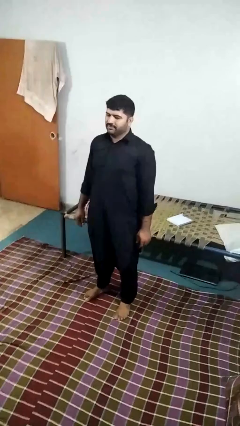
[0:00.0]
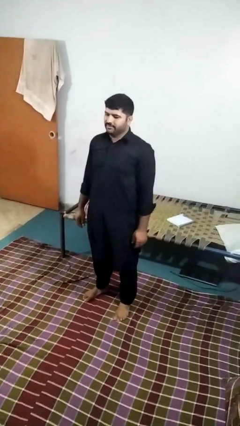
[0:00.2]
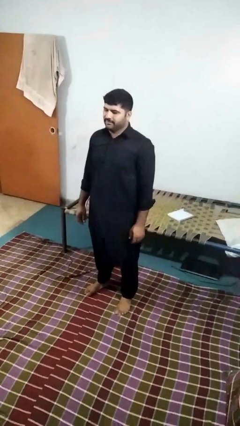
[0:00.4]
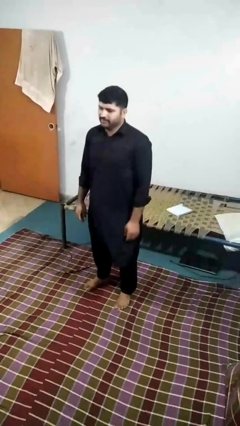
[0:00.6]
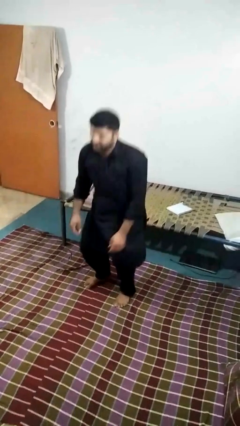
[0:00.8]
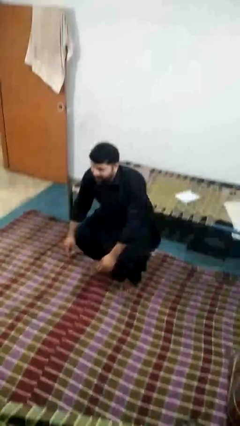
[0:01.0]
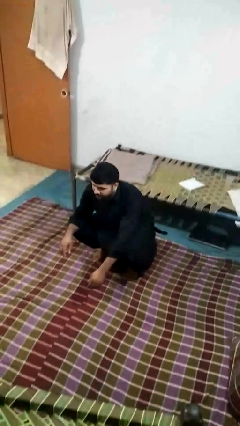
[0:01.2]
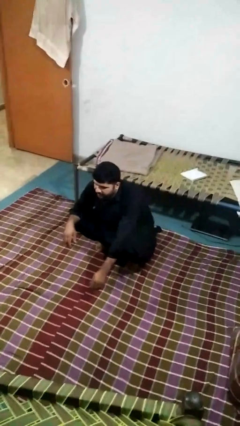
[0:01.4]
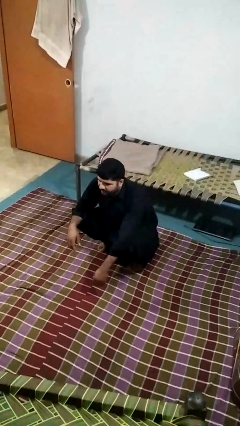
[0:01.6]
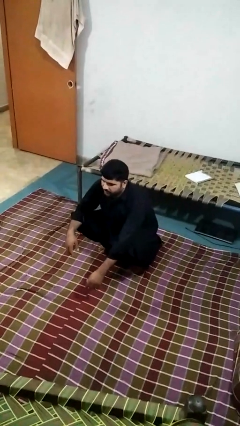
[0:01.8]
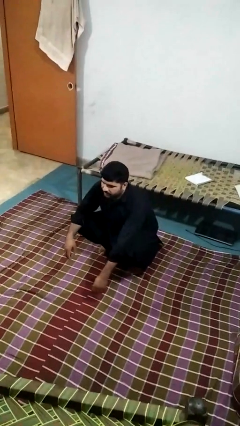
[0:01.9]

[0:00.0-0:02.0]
person squats

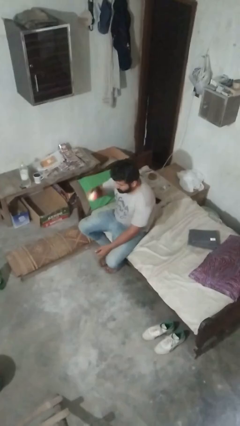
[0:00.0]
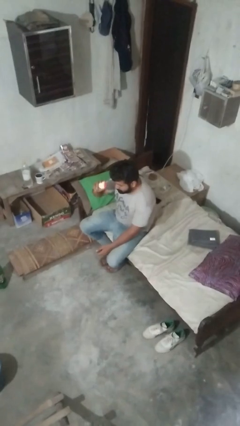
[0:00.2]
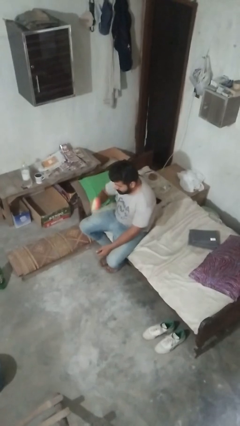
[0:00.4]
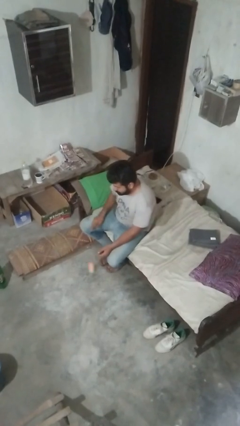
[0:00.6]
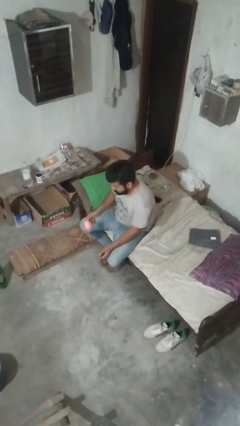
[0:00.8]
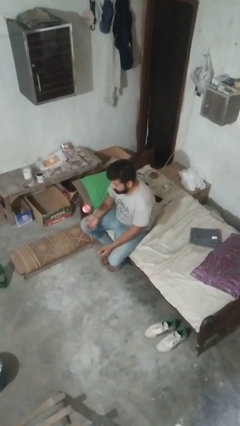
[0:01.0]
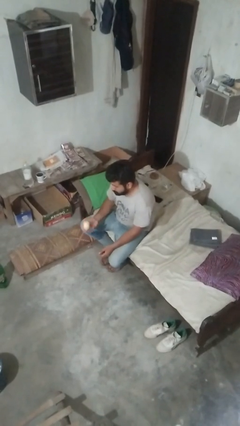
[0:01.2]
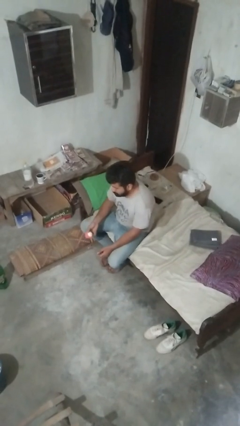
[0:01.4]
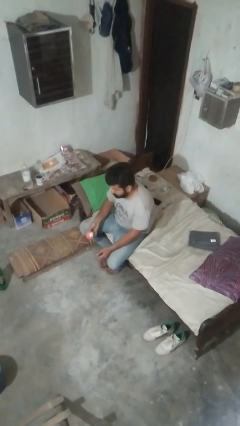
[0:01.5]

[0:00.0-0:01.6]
person bounces ball on floor

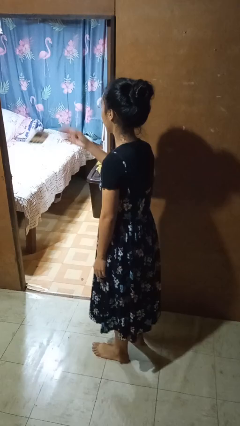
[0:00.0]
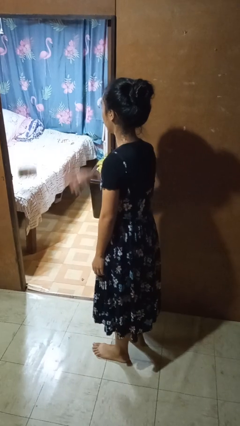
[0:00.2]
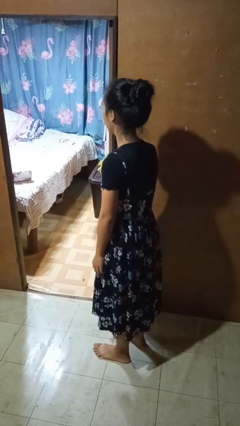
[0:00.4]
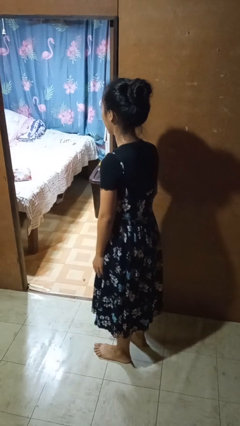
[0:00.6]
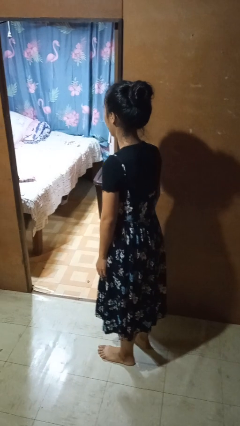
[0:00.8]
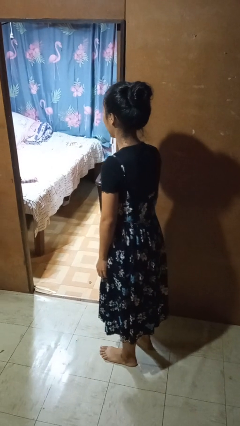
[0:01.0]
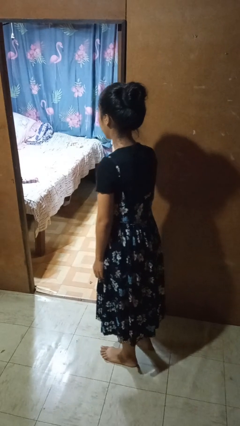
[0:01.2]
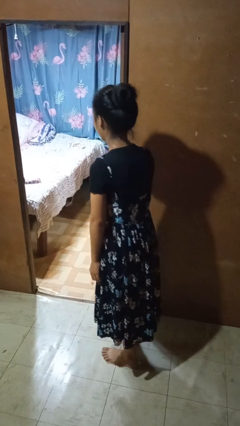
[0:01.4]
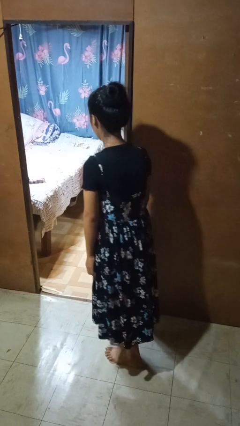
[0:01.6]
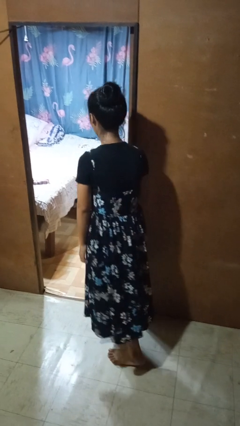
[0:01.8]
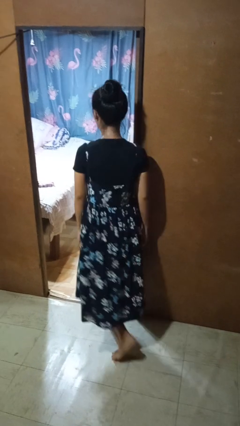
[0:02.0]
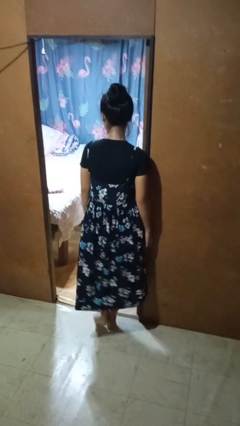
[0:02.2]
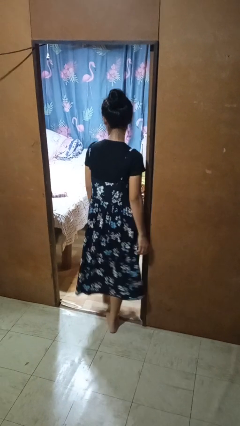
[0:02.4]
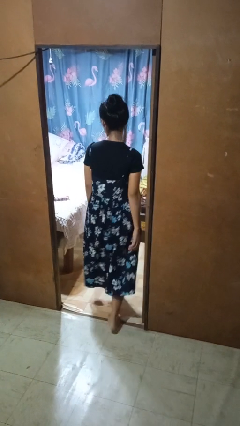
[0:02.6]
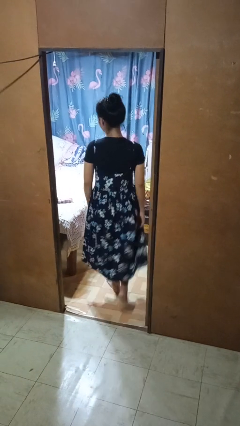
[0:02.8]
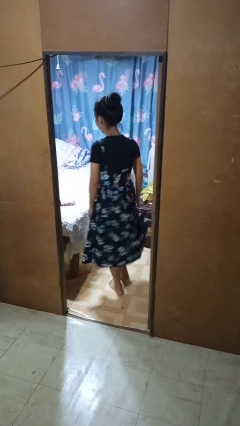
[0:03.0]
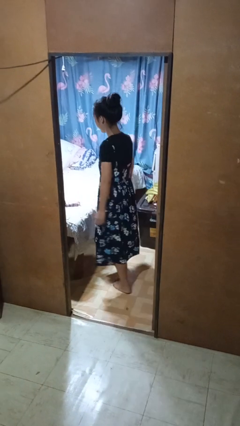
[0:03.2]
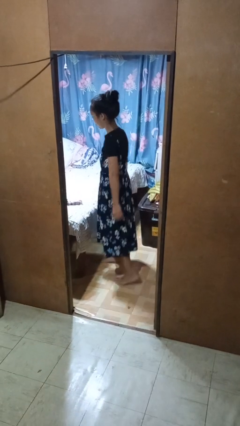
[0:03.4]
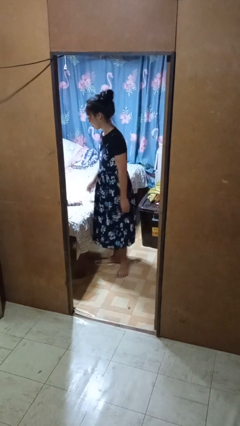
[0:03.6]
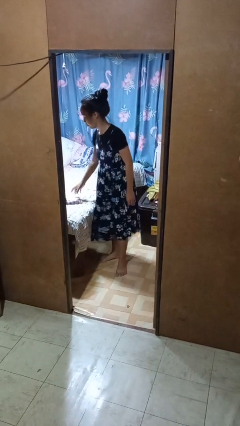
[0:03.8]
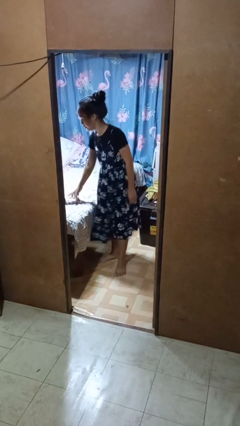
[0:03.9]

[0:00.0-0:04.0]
person throws object on bed

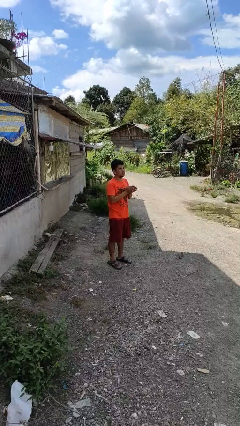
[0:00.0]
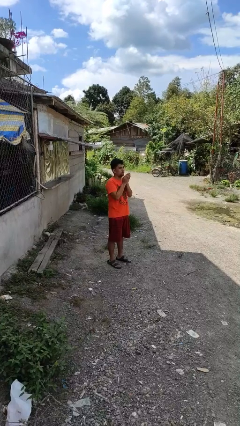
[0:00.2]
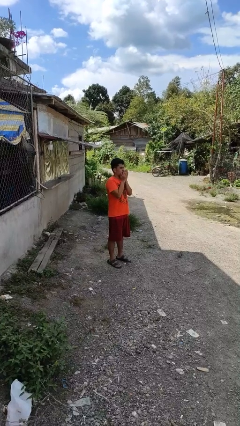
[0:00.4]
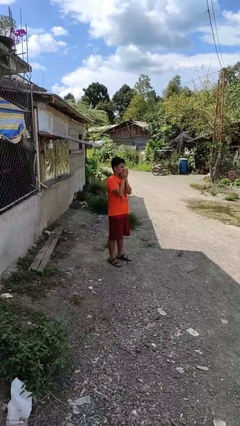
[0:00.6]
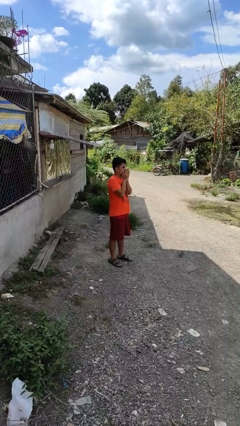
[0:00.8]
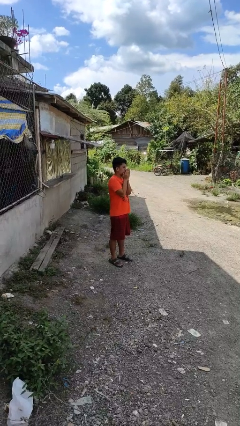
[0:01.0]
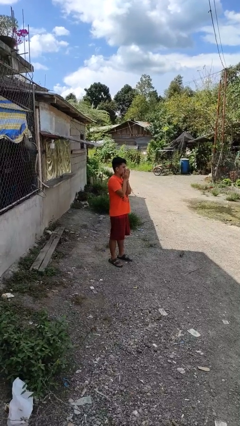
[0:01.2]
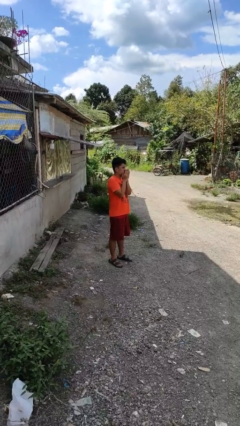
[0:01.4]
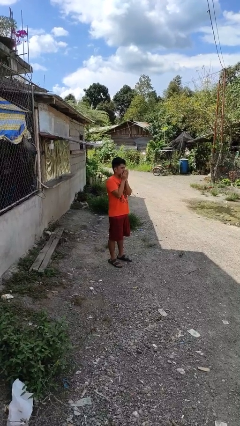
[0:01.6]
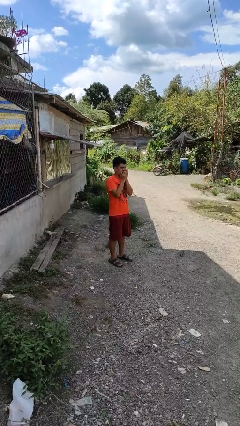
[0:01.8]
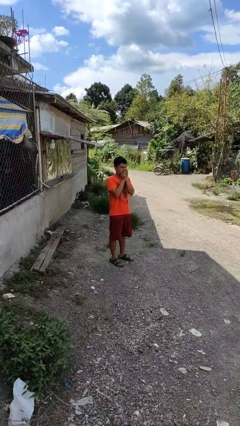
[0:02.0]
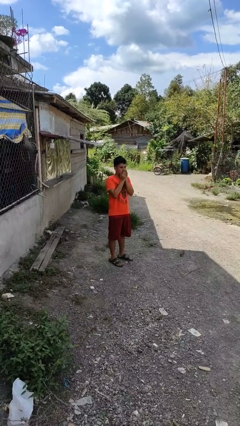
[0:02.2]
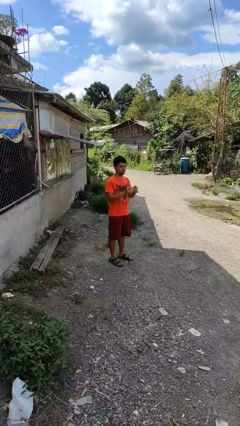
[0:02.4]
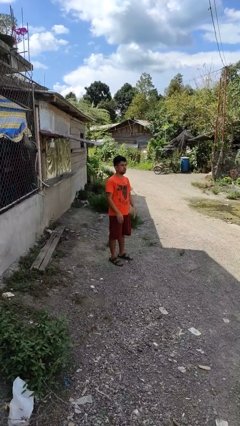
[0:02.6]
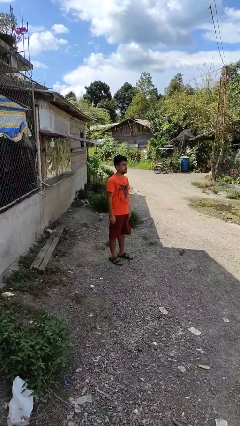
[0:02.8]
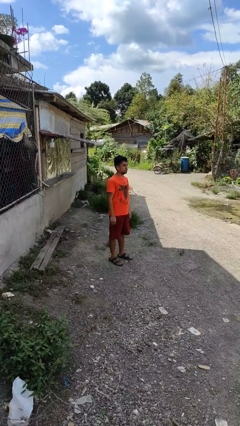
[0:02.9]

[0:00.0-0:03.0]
person blows into hands

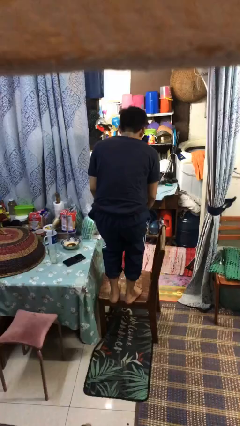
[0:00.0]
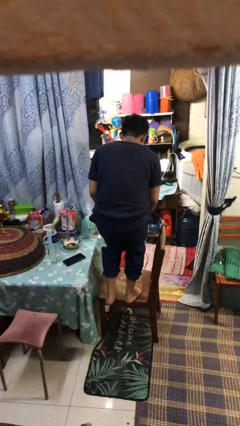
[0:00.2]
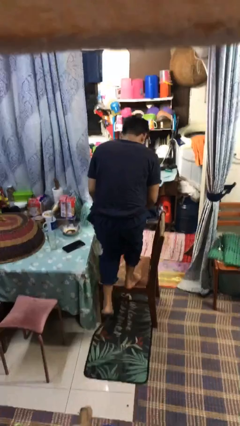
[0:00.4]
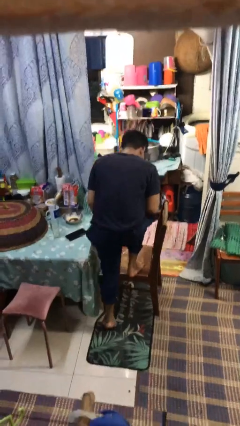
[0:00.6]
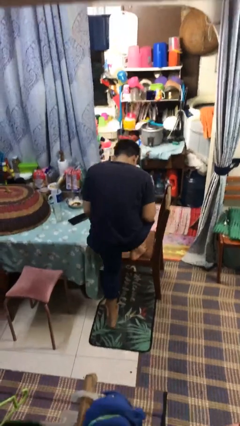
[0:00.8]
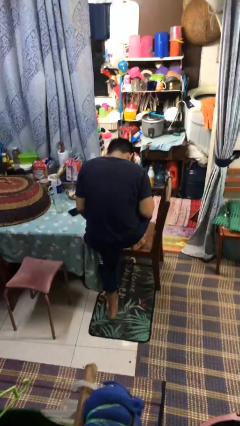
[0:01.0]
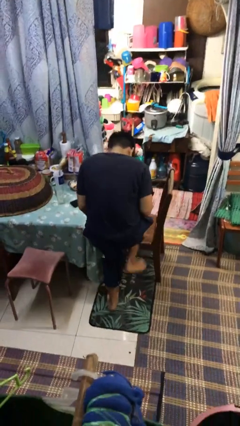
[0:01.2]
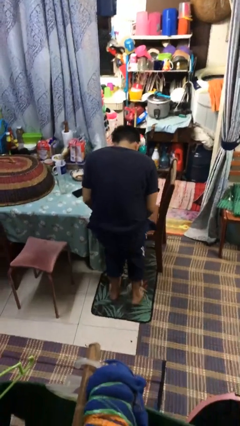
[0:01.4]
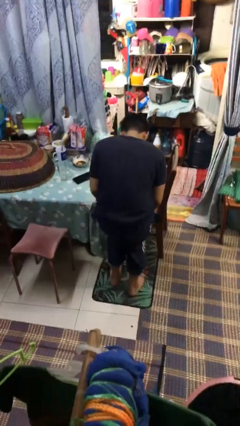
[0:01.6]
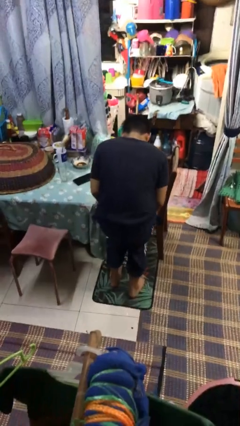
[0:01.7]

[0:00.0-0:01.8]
person climbs off chair

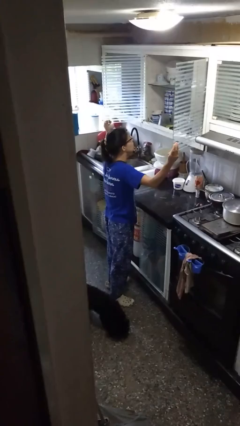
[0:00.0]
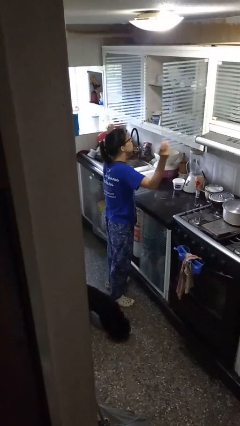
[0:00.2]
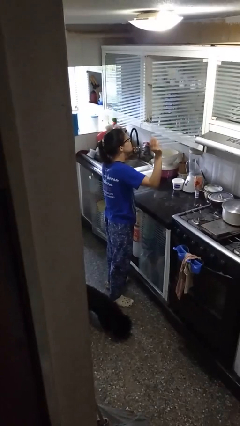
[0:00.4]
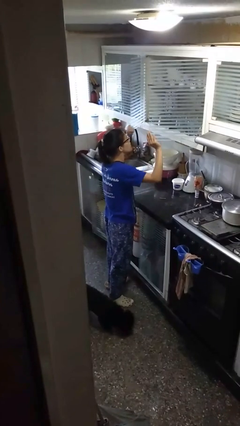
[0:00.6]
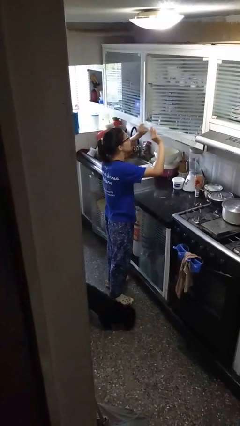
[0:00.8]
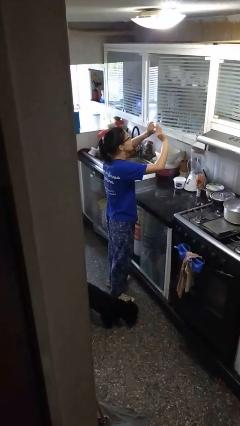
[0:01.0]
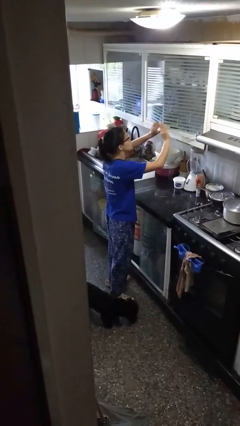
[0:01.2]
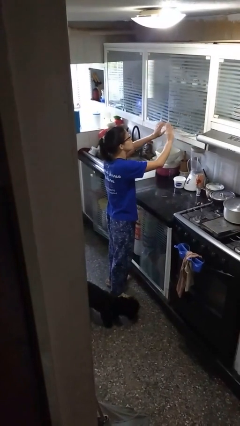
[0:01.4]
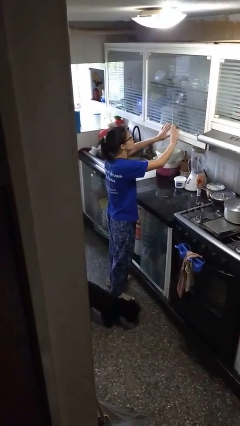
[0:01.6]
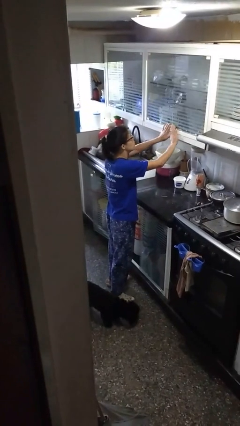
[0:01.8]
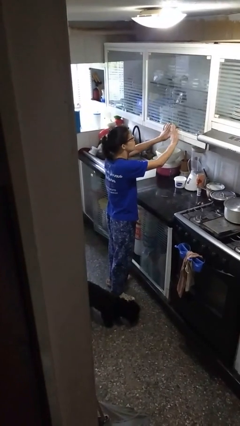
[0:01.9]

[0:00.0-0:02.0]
person closes cabinet

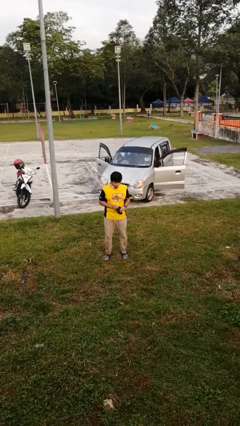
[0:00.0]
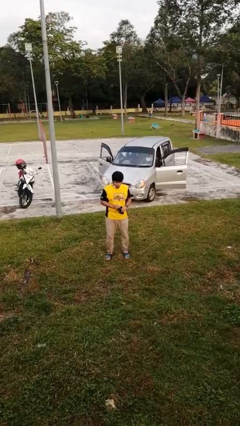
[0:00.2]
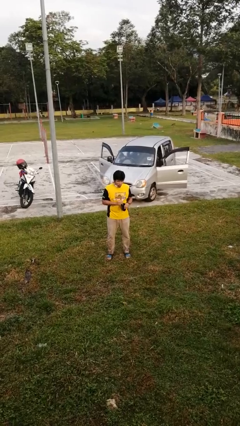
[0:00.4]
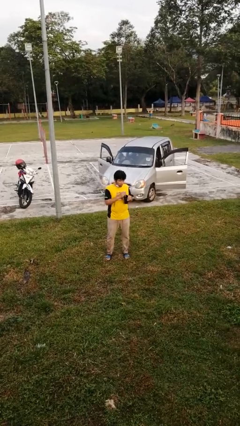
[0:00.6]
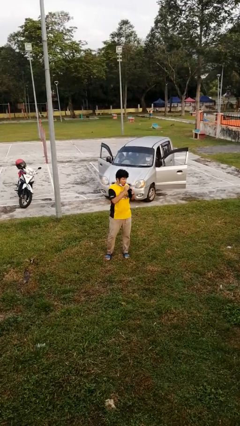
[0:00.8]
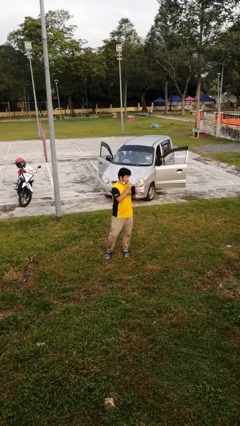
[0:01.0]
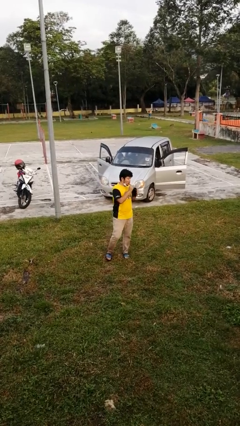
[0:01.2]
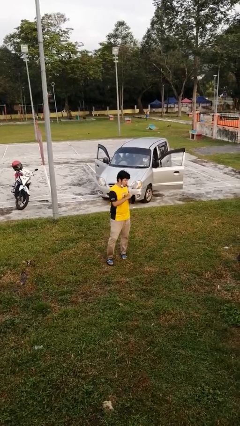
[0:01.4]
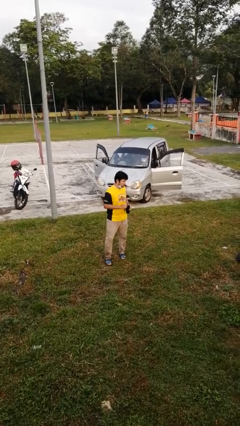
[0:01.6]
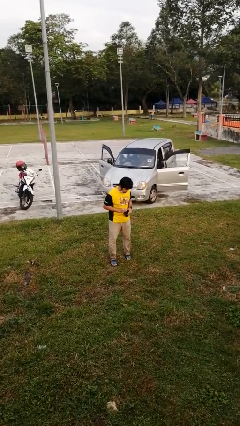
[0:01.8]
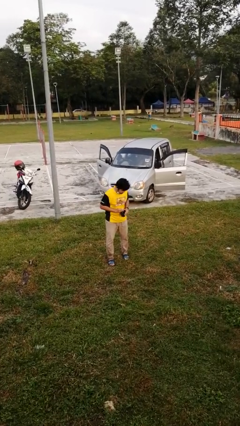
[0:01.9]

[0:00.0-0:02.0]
person drinks from straw

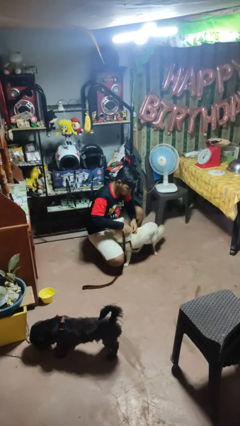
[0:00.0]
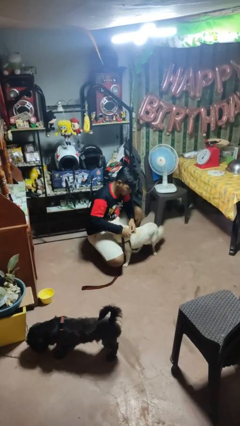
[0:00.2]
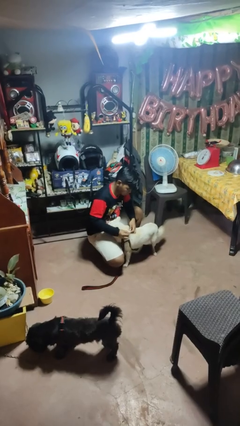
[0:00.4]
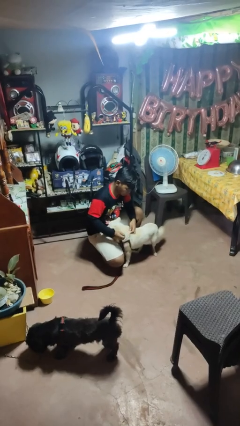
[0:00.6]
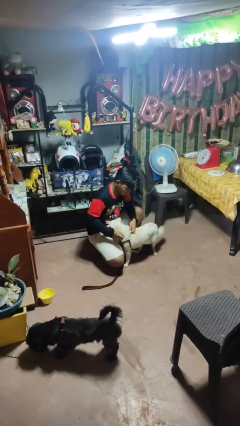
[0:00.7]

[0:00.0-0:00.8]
person unattaches leash from dog
